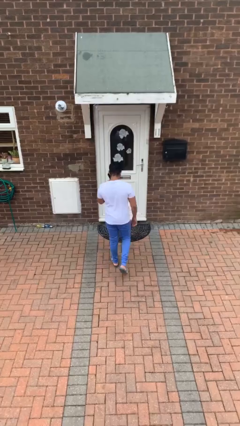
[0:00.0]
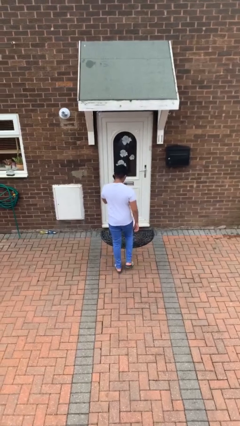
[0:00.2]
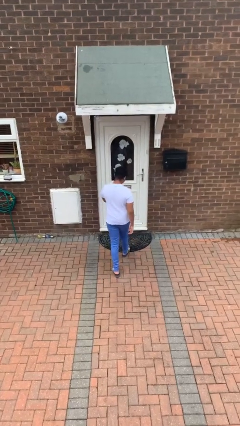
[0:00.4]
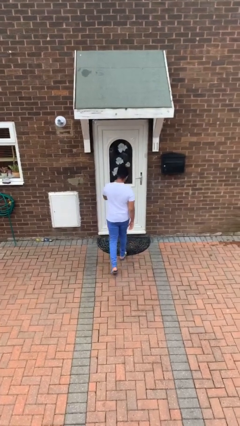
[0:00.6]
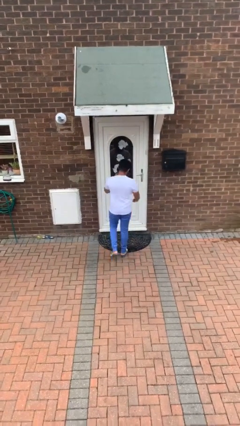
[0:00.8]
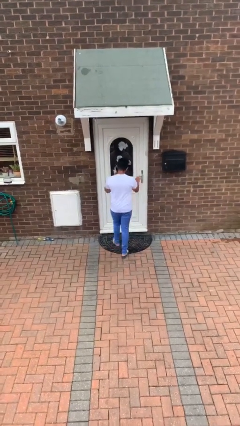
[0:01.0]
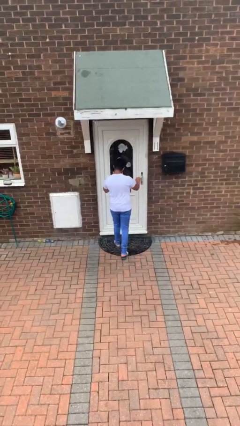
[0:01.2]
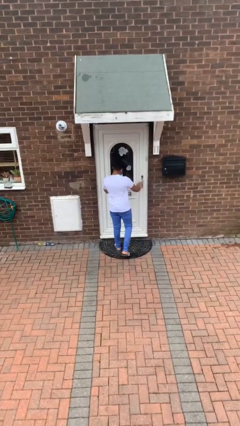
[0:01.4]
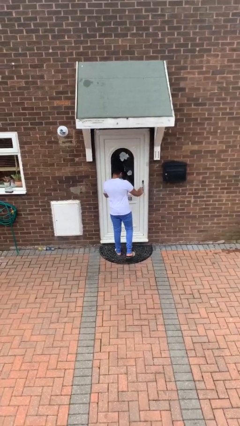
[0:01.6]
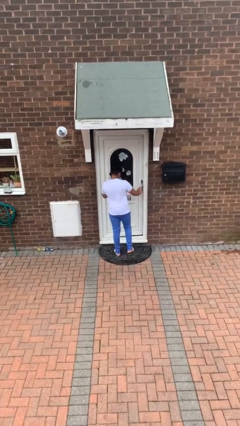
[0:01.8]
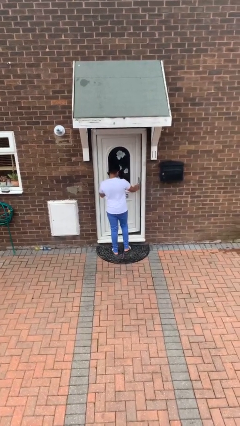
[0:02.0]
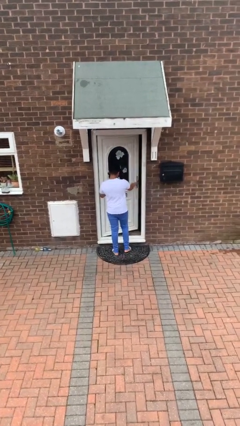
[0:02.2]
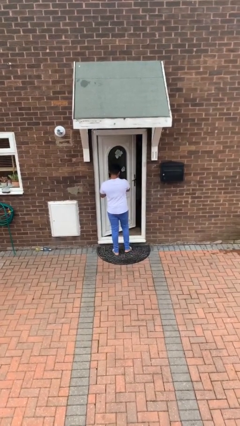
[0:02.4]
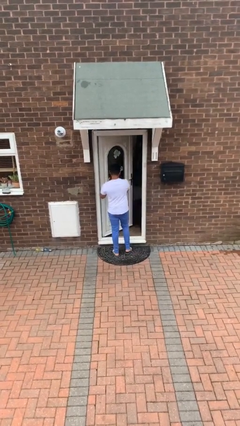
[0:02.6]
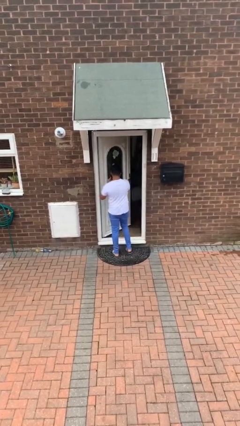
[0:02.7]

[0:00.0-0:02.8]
person opens facility door

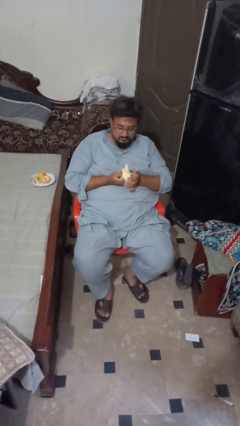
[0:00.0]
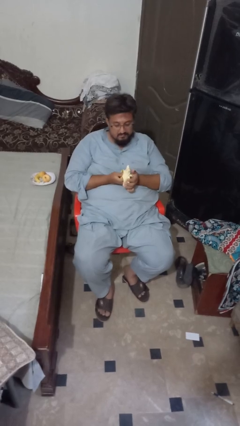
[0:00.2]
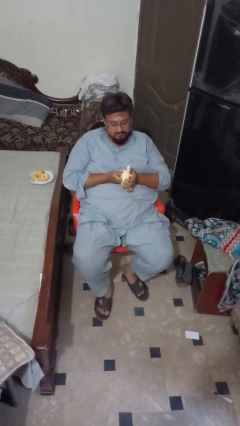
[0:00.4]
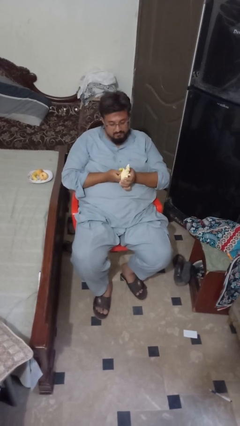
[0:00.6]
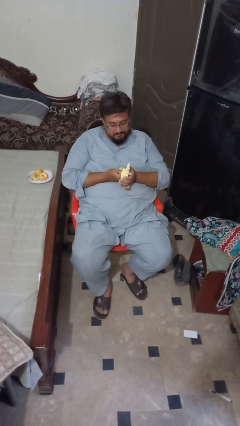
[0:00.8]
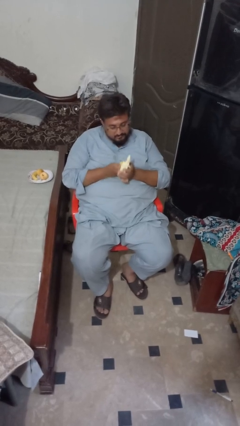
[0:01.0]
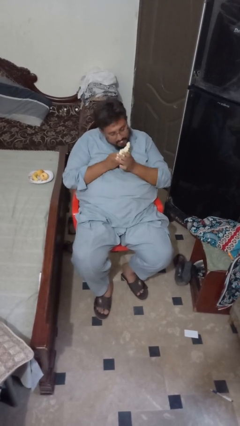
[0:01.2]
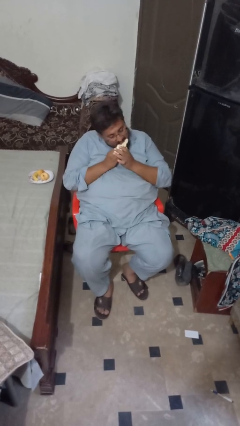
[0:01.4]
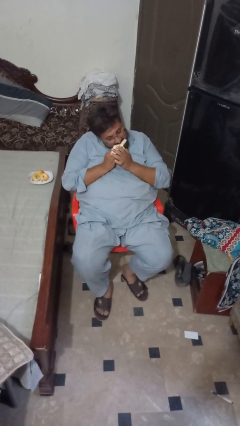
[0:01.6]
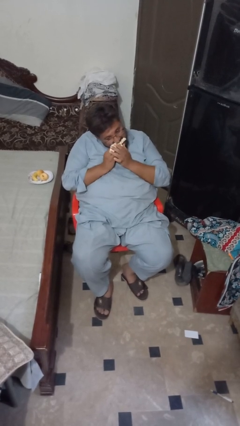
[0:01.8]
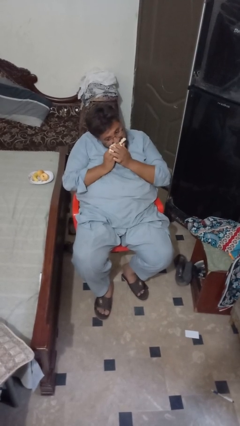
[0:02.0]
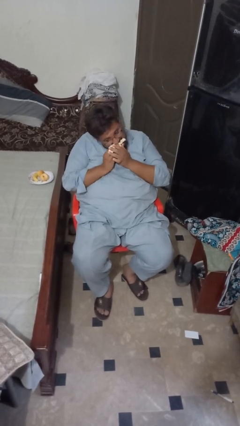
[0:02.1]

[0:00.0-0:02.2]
person eats banana

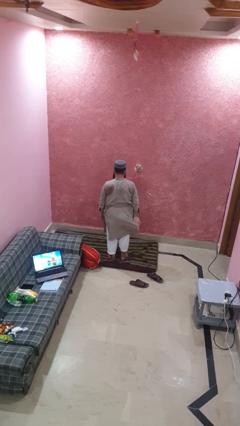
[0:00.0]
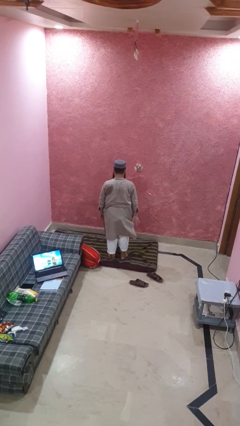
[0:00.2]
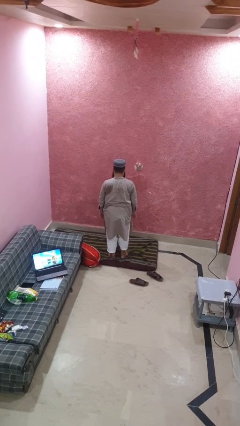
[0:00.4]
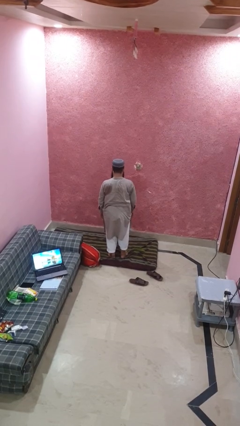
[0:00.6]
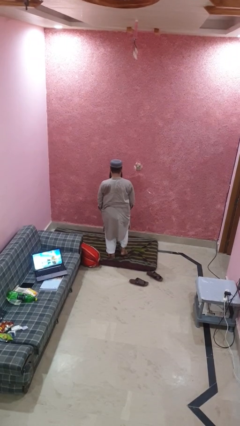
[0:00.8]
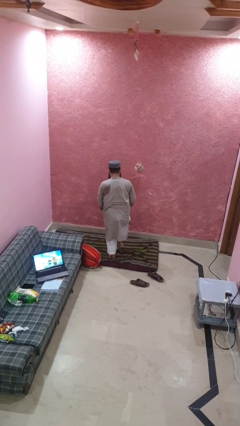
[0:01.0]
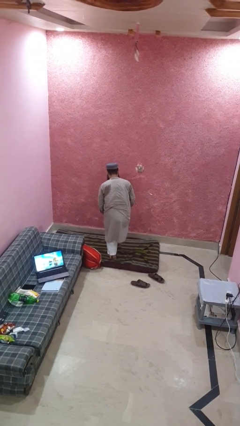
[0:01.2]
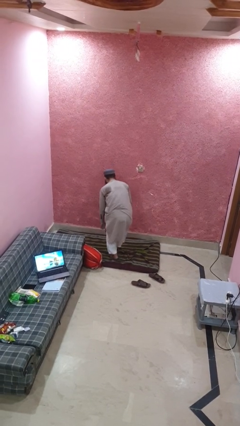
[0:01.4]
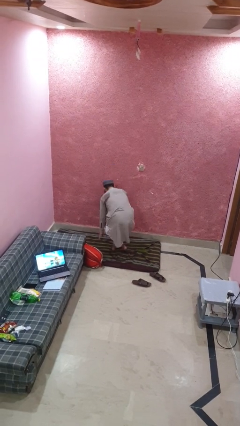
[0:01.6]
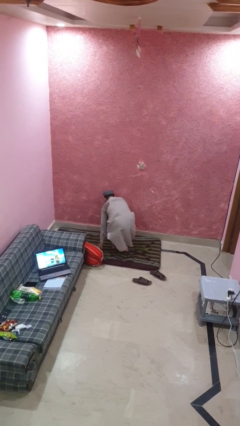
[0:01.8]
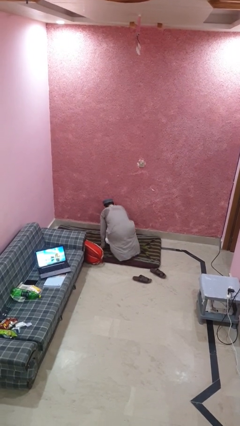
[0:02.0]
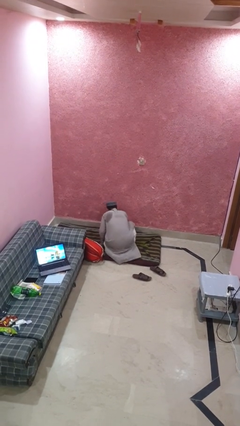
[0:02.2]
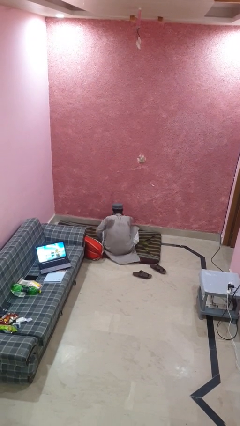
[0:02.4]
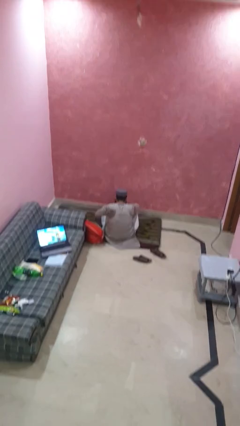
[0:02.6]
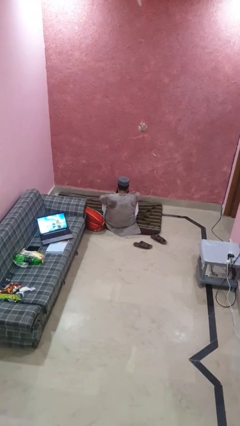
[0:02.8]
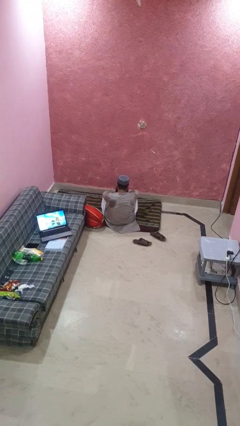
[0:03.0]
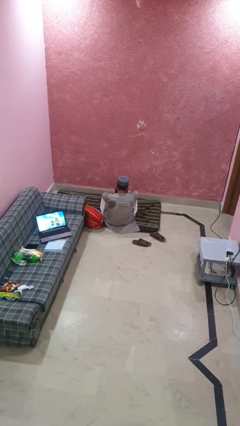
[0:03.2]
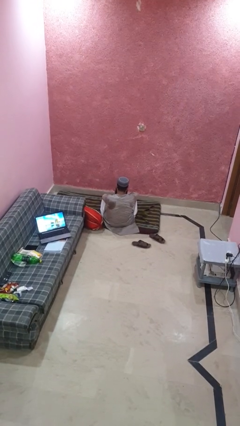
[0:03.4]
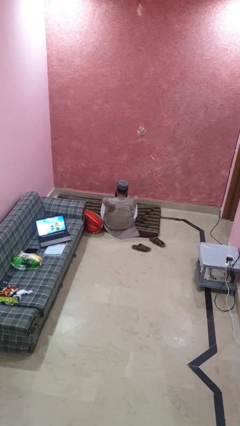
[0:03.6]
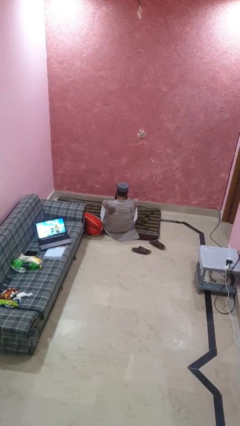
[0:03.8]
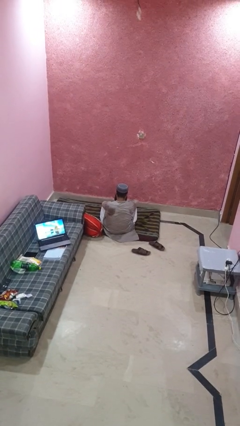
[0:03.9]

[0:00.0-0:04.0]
person sits crisscross

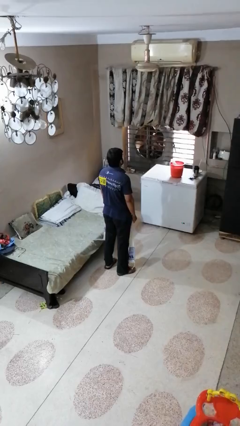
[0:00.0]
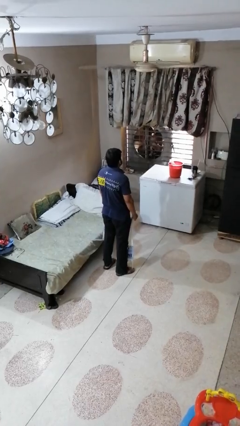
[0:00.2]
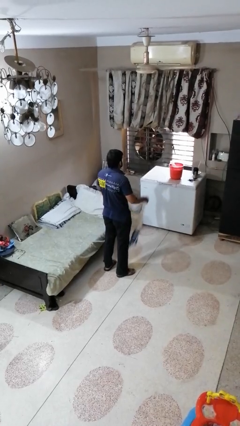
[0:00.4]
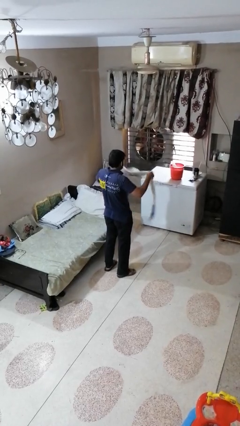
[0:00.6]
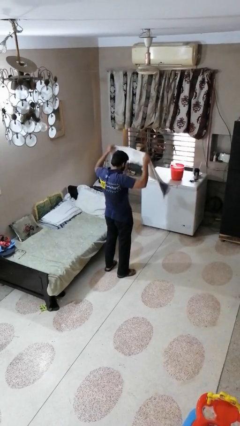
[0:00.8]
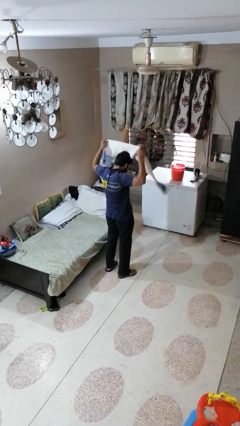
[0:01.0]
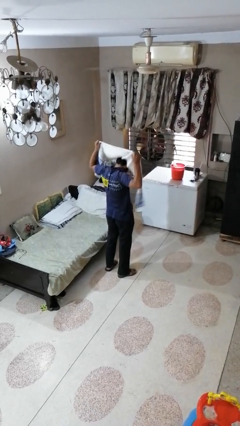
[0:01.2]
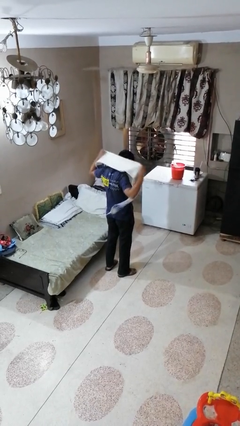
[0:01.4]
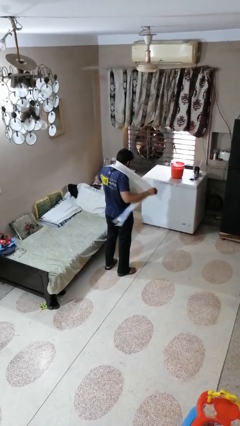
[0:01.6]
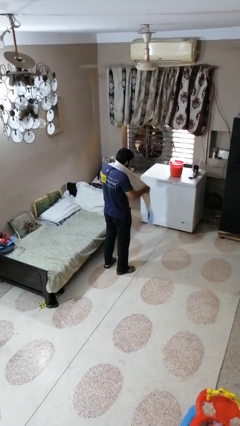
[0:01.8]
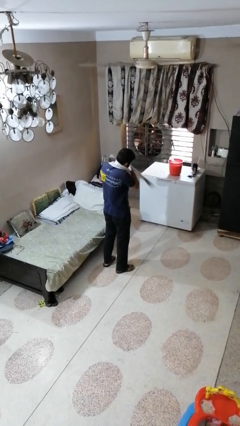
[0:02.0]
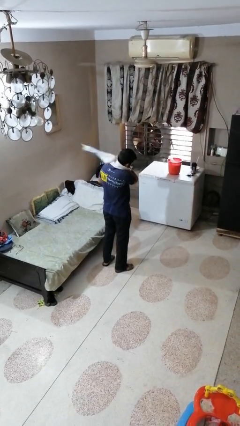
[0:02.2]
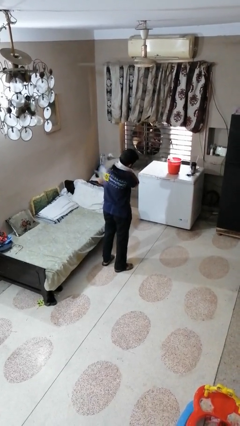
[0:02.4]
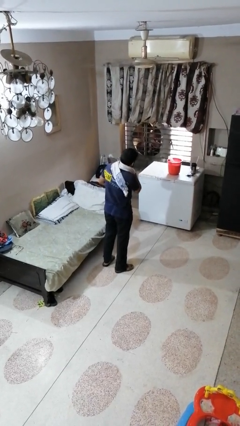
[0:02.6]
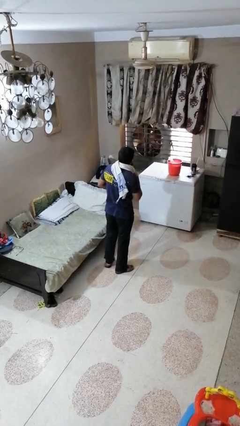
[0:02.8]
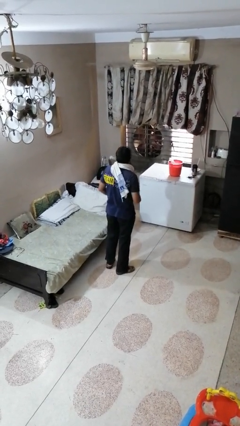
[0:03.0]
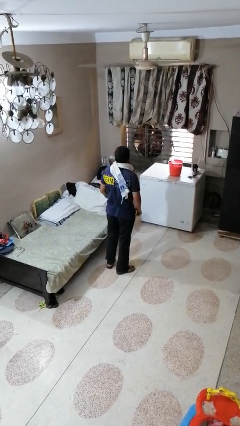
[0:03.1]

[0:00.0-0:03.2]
person puts on scarf

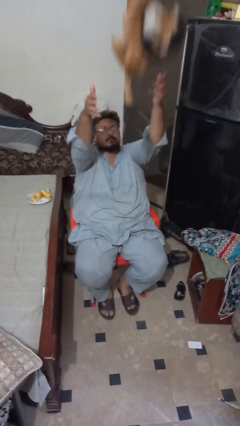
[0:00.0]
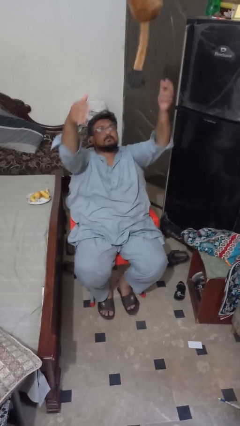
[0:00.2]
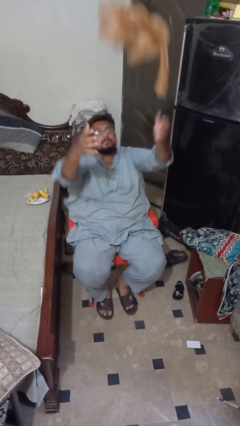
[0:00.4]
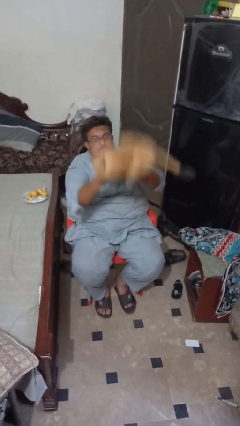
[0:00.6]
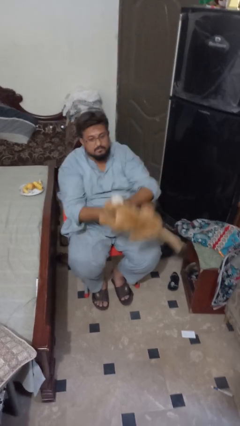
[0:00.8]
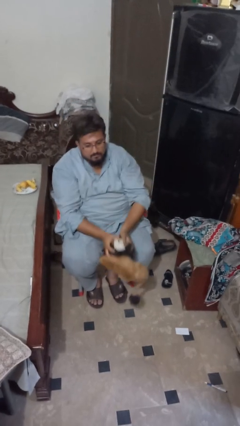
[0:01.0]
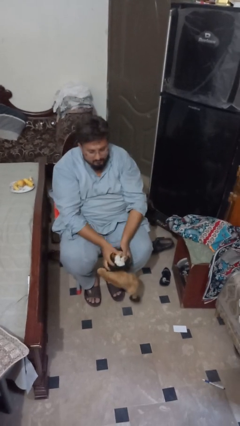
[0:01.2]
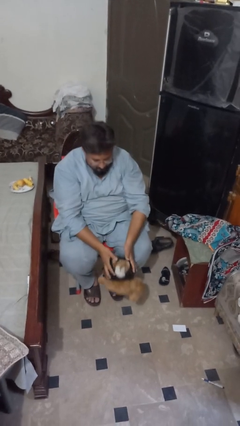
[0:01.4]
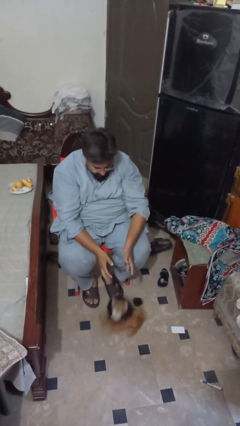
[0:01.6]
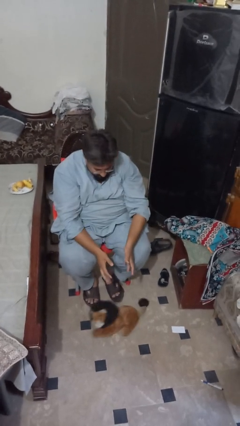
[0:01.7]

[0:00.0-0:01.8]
person catches dropped object

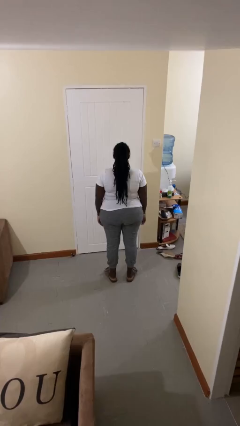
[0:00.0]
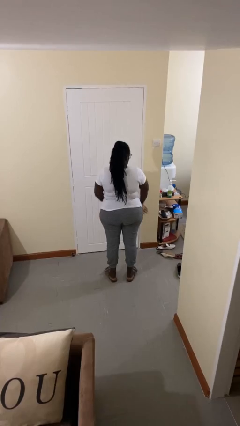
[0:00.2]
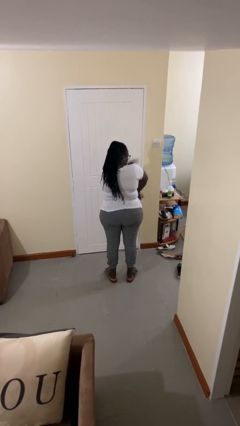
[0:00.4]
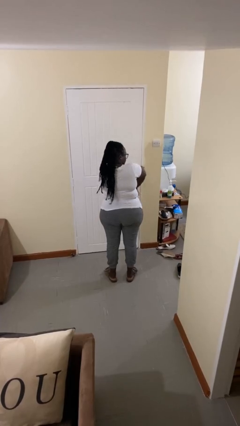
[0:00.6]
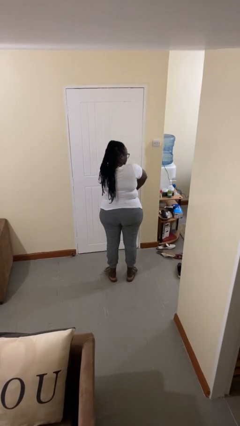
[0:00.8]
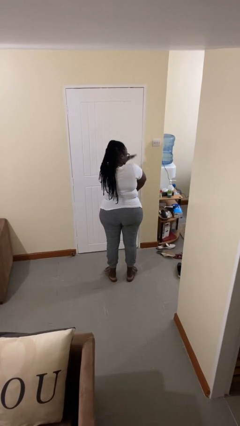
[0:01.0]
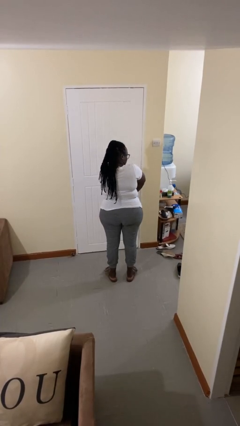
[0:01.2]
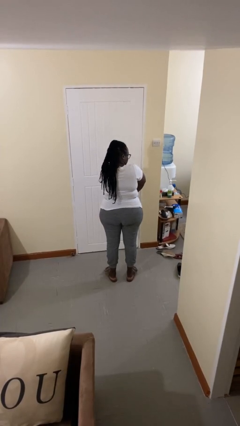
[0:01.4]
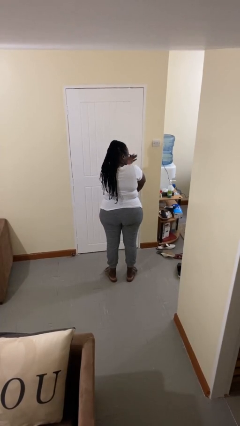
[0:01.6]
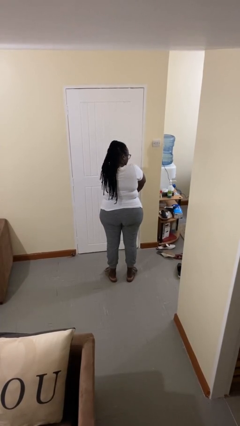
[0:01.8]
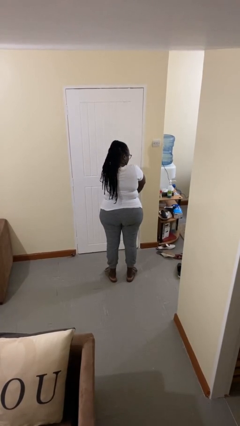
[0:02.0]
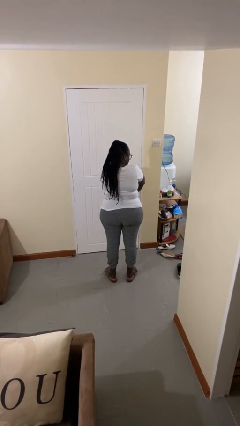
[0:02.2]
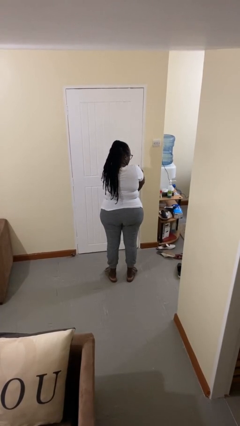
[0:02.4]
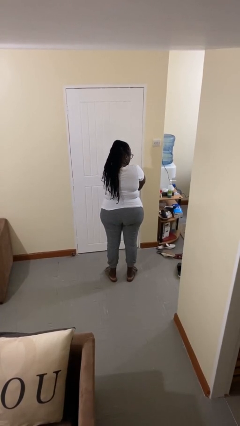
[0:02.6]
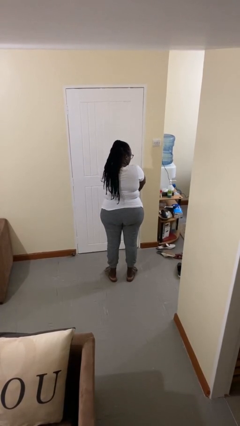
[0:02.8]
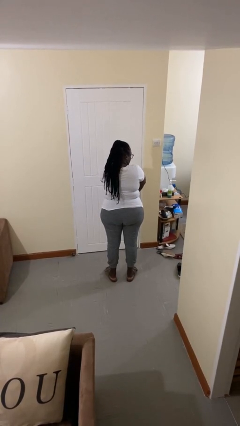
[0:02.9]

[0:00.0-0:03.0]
person swats bug

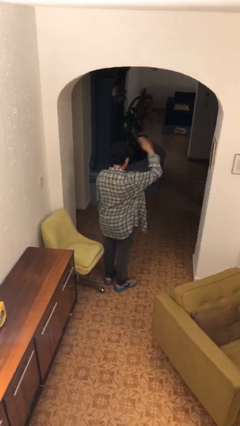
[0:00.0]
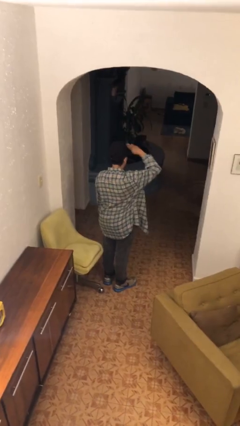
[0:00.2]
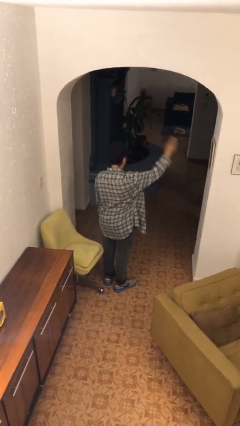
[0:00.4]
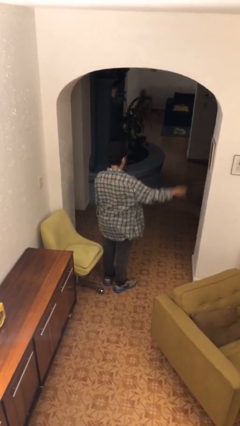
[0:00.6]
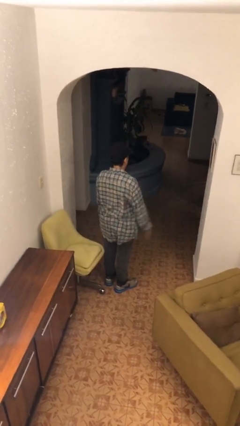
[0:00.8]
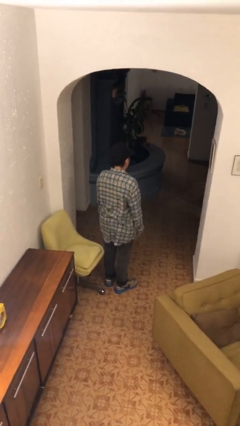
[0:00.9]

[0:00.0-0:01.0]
person salutes
